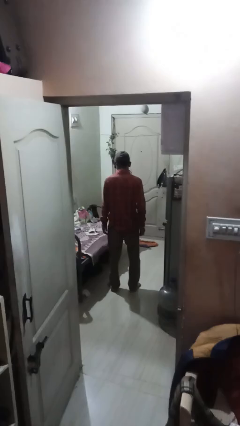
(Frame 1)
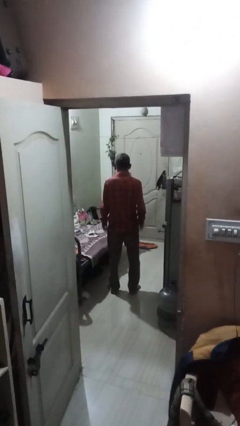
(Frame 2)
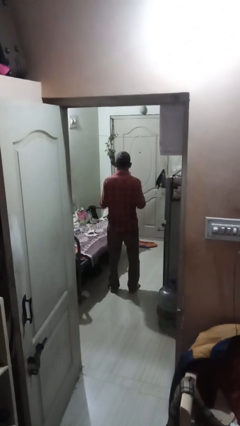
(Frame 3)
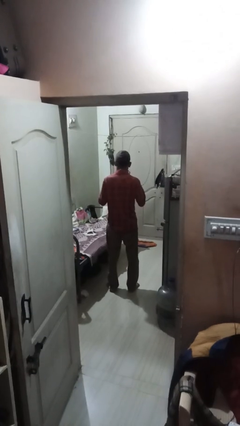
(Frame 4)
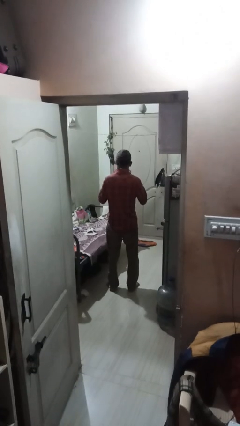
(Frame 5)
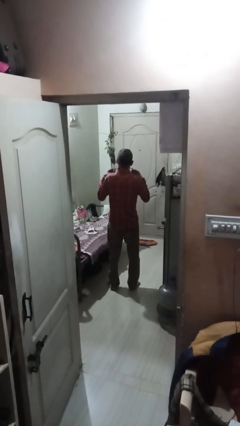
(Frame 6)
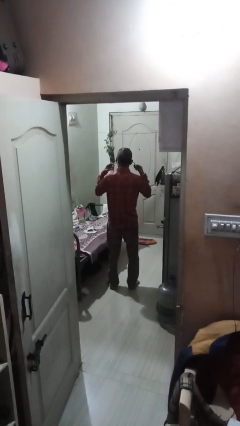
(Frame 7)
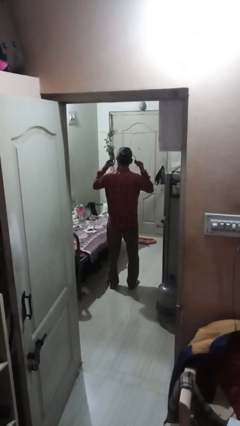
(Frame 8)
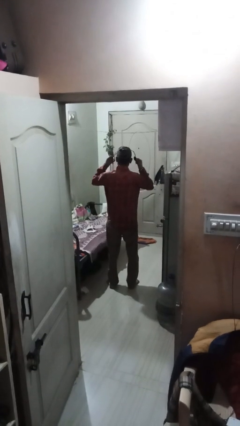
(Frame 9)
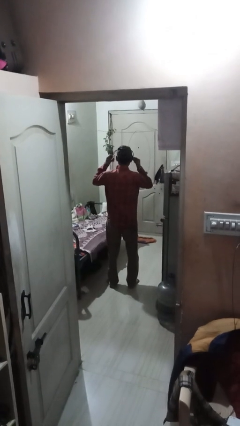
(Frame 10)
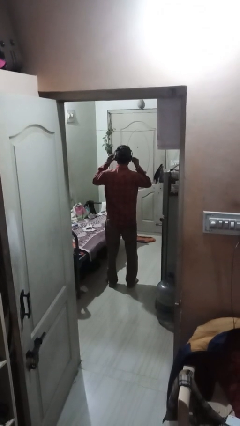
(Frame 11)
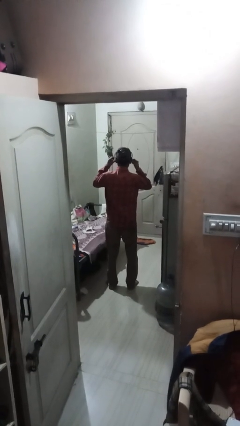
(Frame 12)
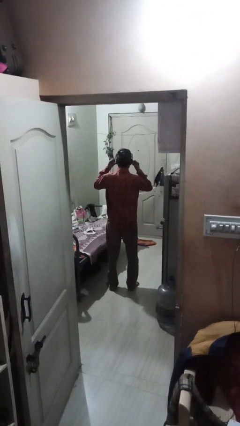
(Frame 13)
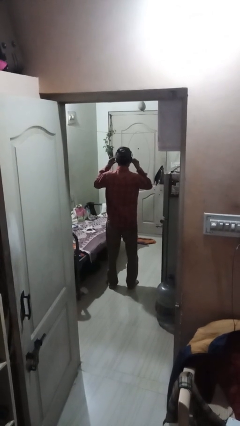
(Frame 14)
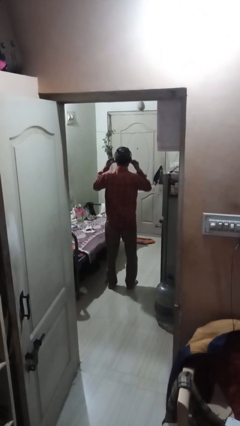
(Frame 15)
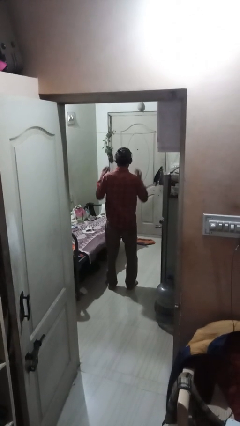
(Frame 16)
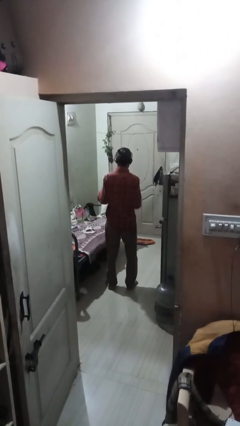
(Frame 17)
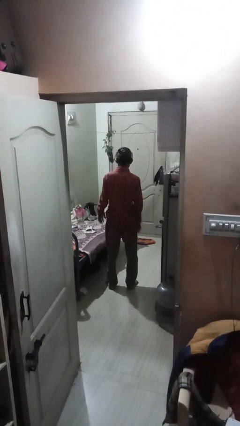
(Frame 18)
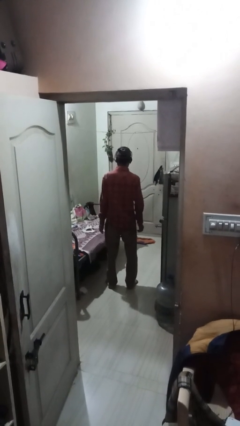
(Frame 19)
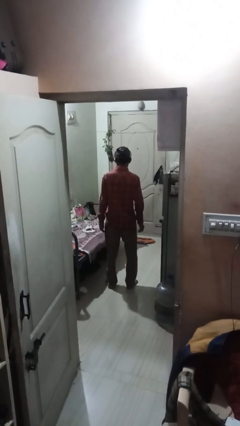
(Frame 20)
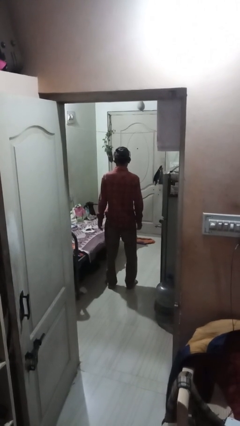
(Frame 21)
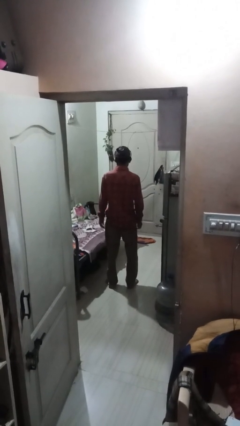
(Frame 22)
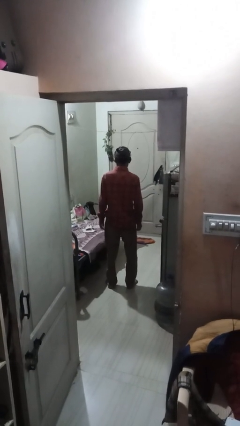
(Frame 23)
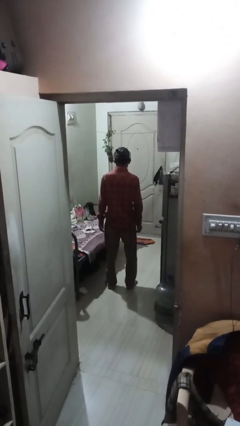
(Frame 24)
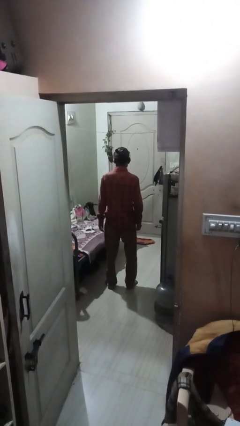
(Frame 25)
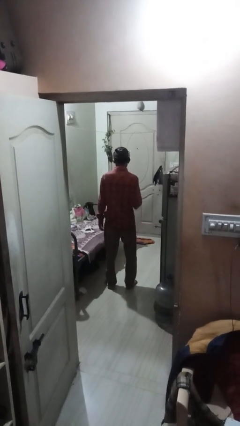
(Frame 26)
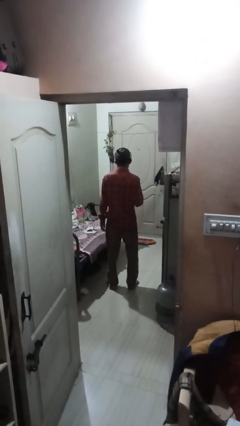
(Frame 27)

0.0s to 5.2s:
person puts on headphones

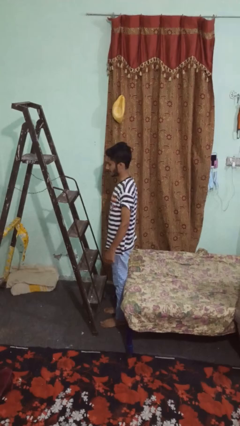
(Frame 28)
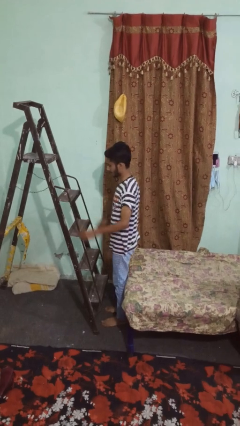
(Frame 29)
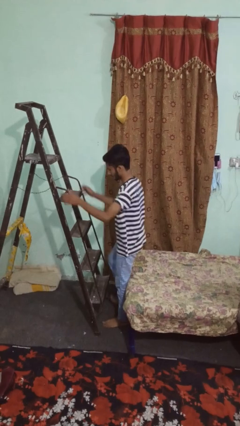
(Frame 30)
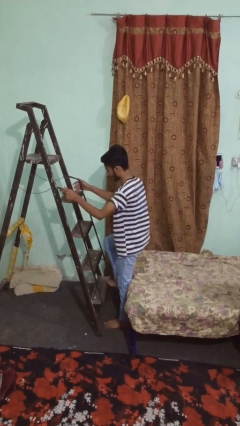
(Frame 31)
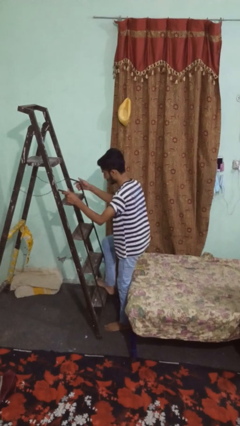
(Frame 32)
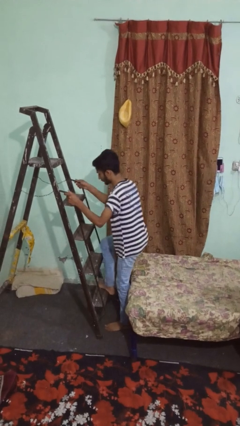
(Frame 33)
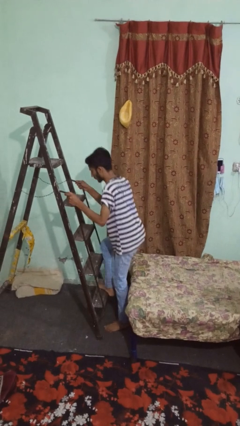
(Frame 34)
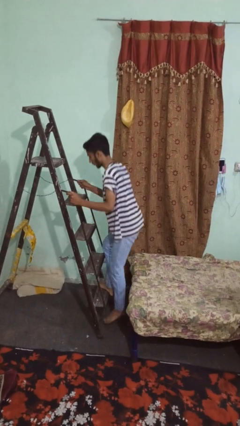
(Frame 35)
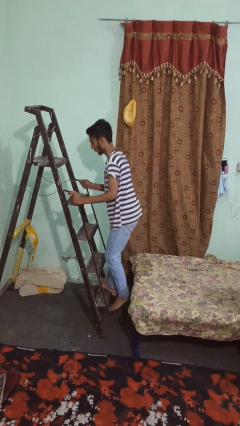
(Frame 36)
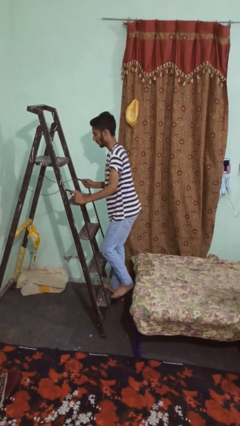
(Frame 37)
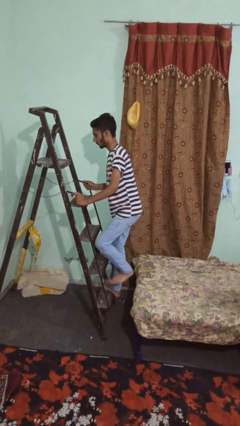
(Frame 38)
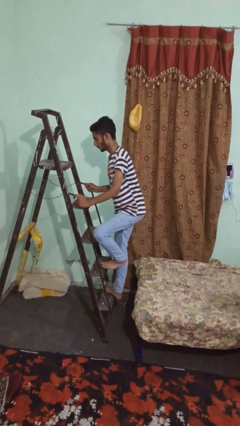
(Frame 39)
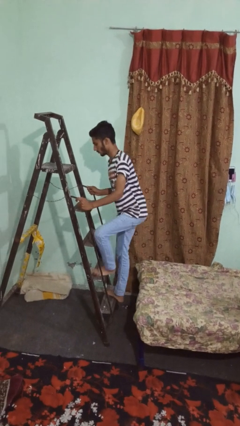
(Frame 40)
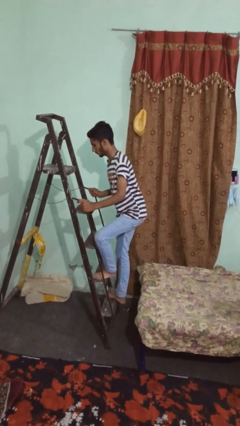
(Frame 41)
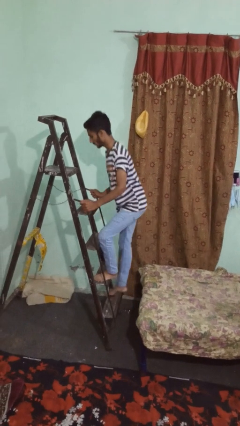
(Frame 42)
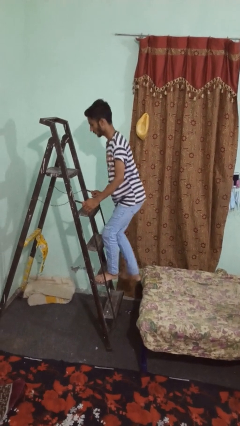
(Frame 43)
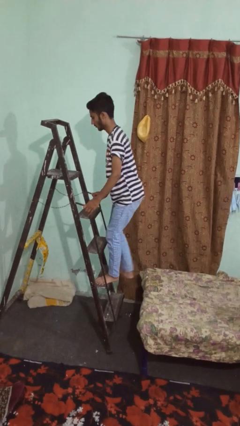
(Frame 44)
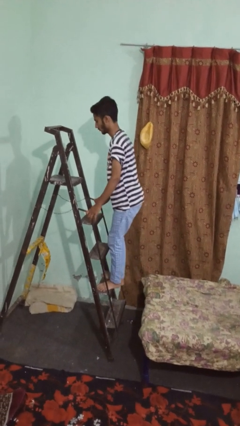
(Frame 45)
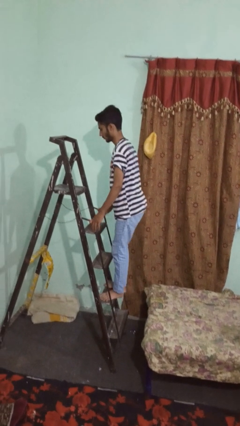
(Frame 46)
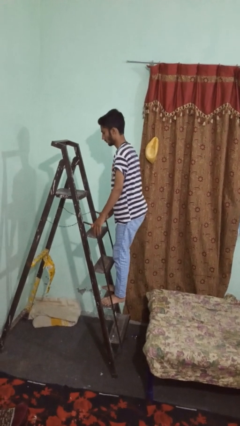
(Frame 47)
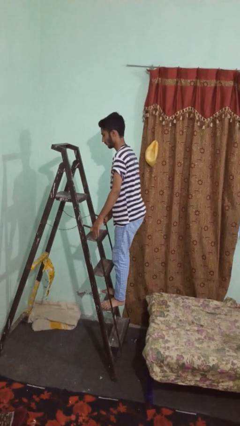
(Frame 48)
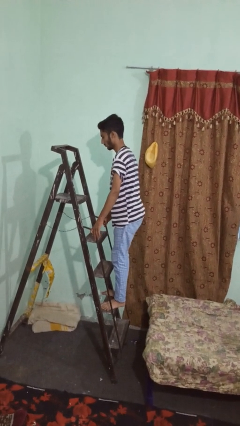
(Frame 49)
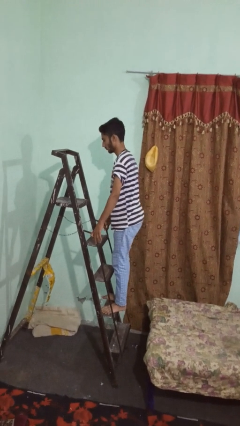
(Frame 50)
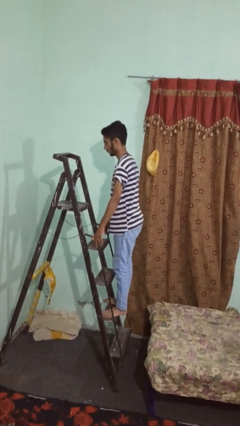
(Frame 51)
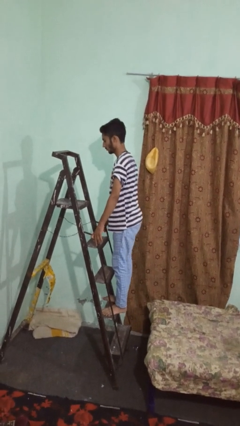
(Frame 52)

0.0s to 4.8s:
person climbs up ladder

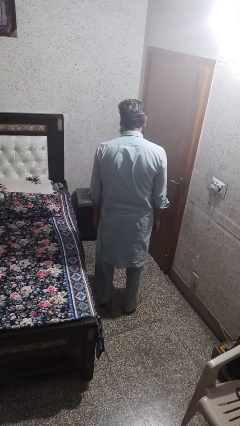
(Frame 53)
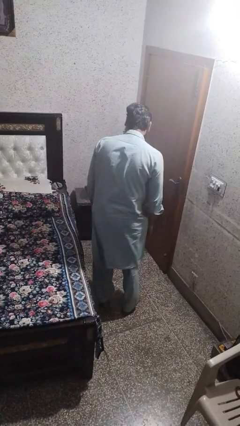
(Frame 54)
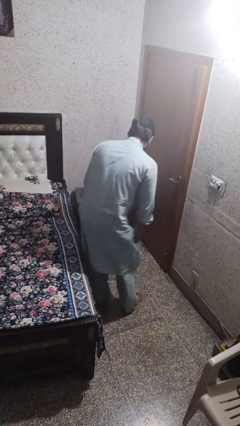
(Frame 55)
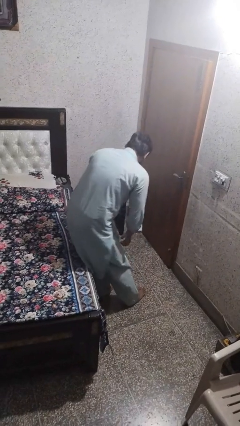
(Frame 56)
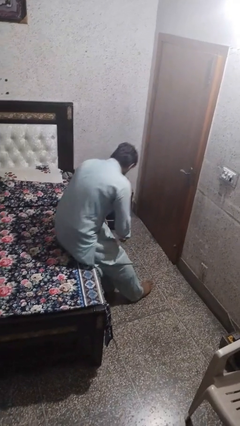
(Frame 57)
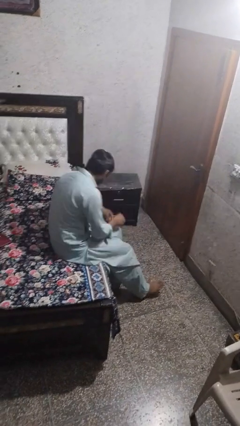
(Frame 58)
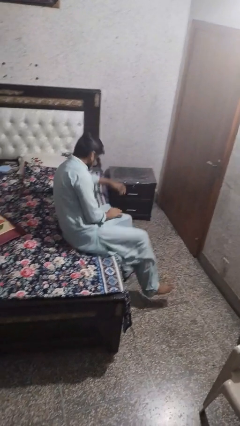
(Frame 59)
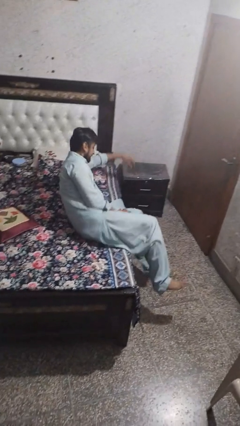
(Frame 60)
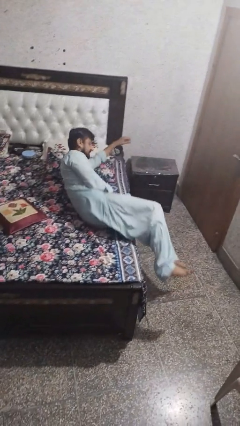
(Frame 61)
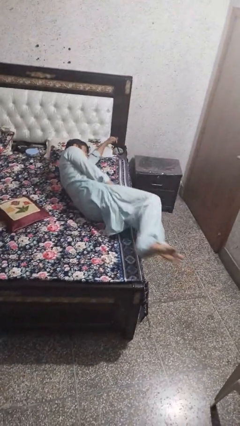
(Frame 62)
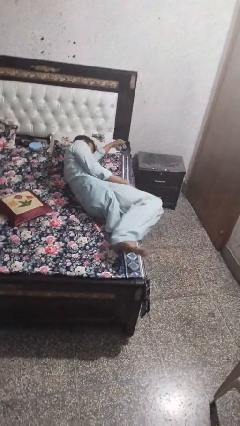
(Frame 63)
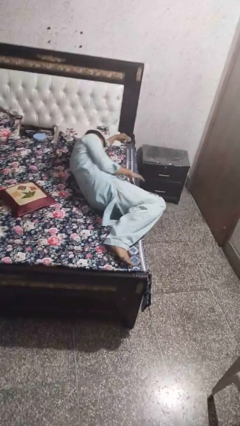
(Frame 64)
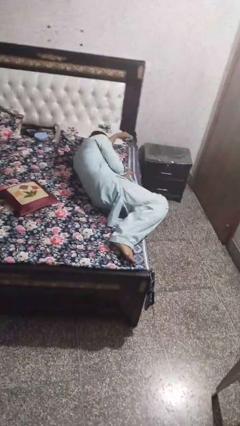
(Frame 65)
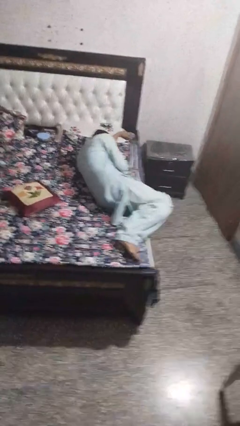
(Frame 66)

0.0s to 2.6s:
person lies down on bed

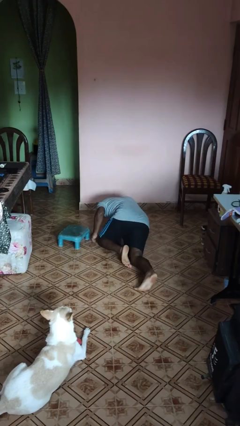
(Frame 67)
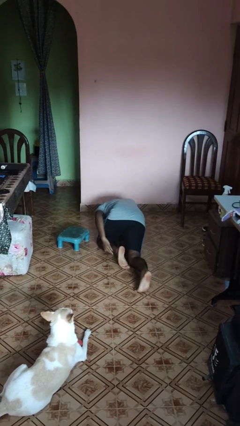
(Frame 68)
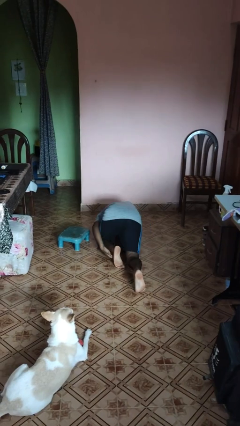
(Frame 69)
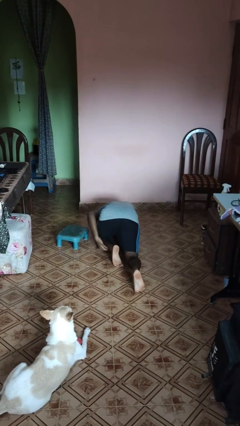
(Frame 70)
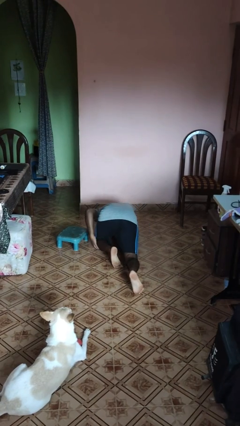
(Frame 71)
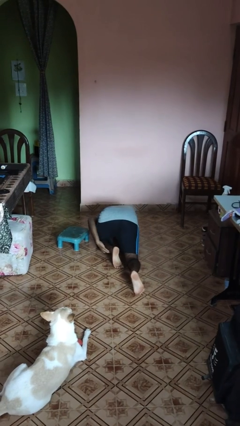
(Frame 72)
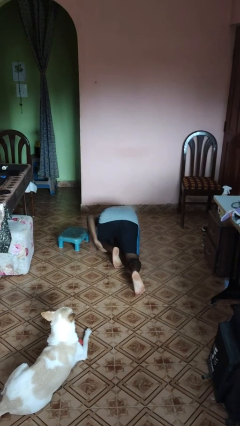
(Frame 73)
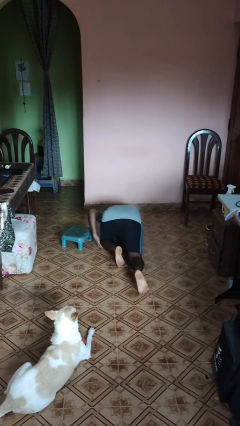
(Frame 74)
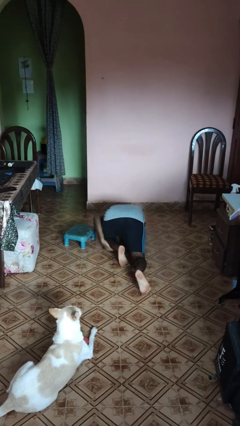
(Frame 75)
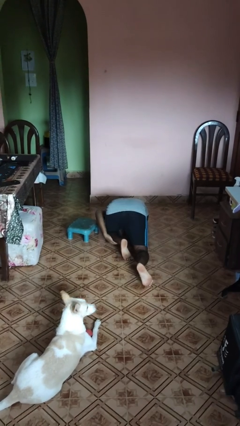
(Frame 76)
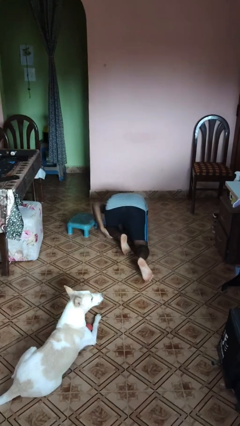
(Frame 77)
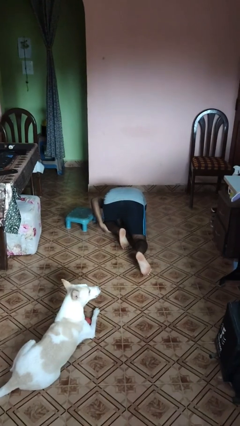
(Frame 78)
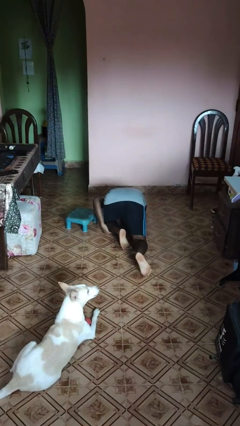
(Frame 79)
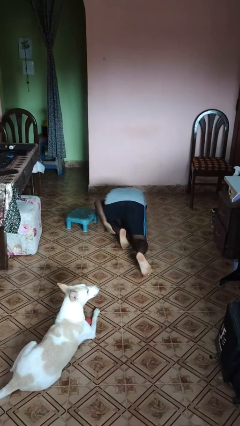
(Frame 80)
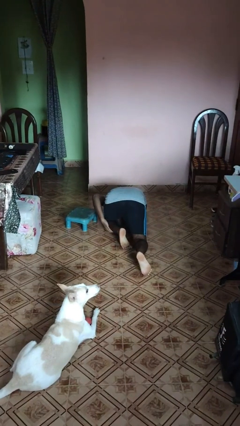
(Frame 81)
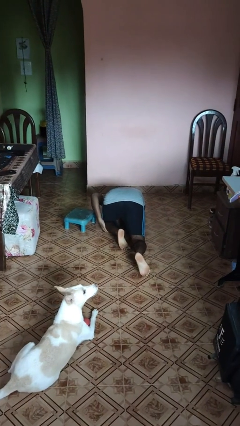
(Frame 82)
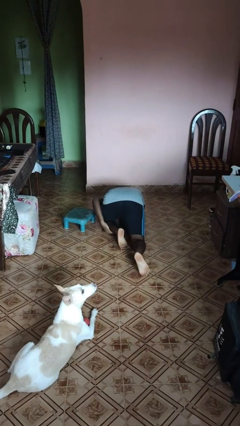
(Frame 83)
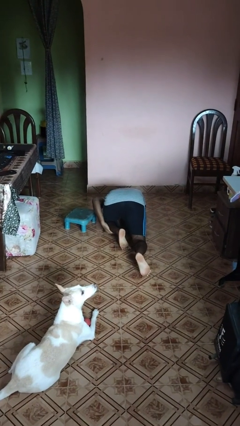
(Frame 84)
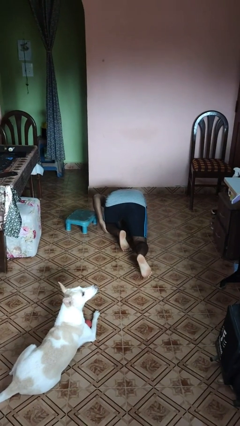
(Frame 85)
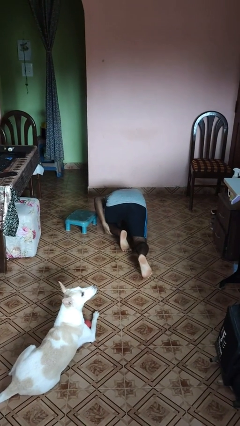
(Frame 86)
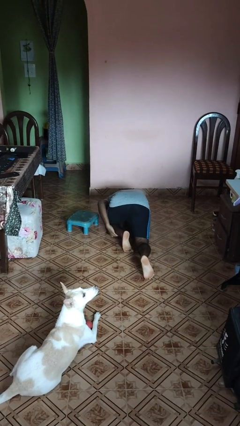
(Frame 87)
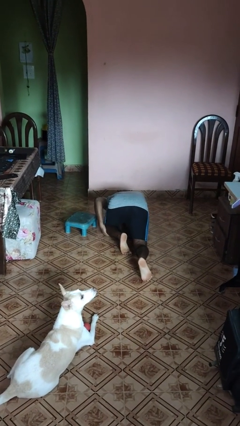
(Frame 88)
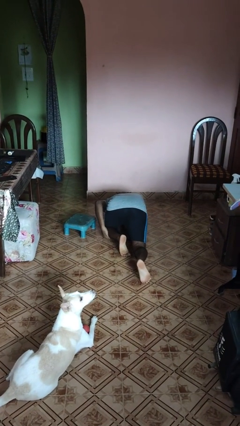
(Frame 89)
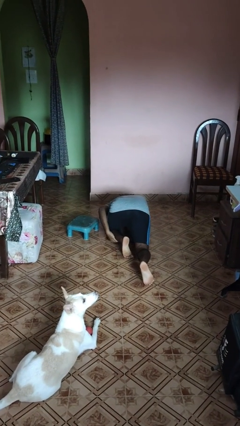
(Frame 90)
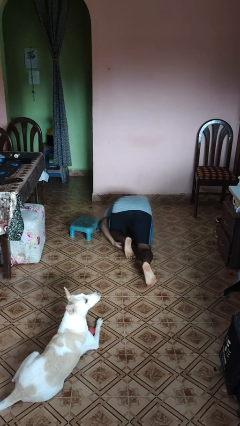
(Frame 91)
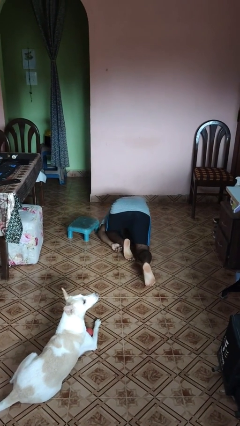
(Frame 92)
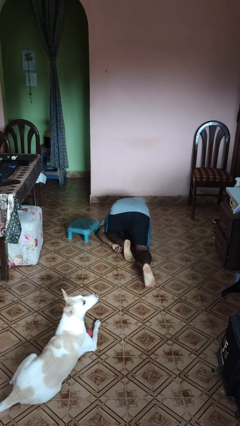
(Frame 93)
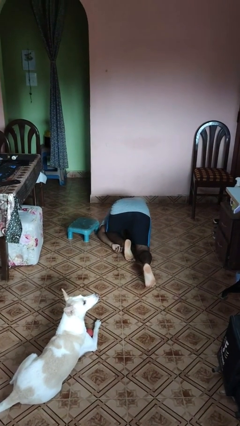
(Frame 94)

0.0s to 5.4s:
person lies down on floor
